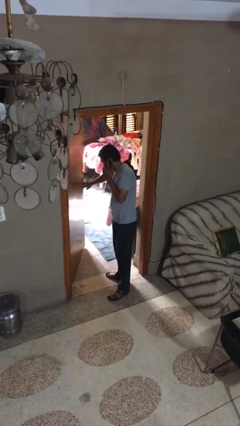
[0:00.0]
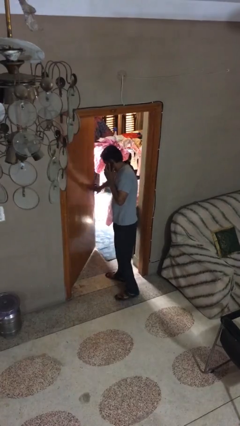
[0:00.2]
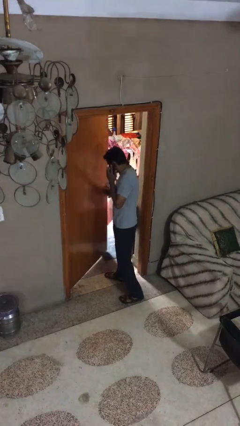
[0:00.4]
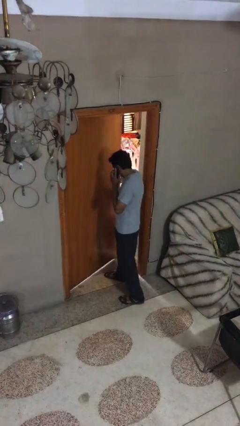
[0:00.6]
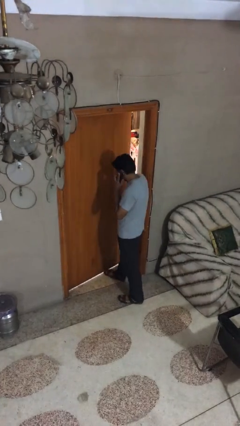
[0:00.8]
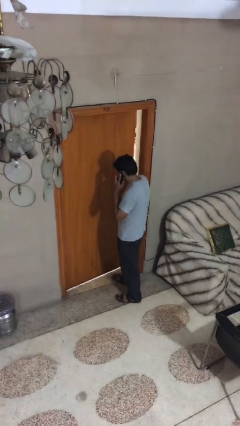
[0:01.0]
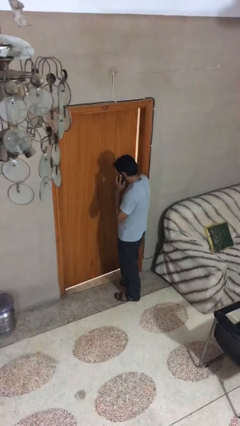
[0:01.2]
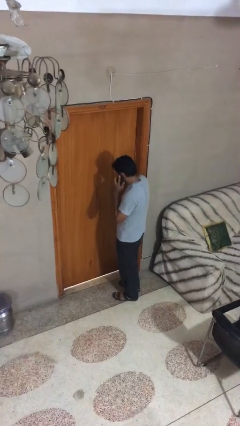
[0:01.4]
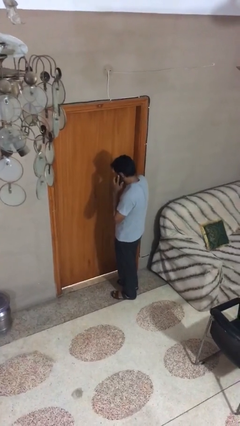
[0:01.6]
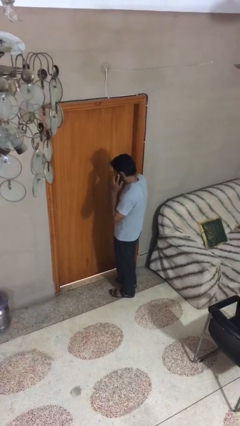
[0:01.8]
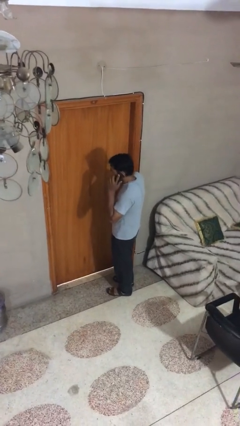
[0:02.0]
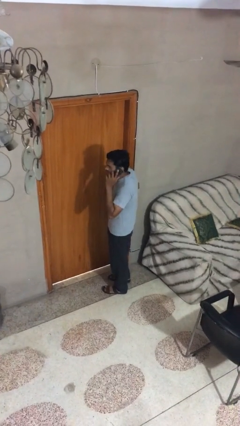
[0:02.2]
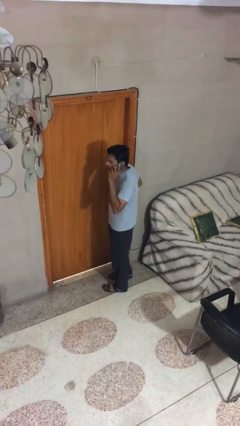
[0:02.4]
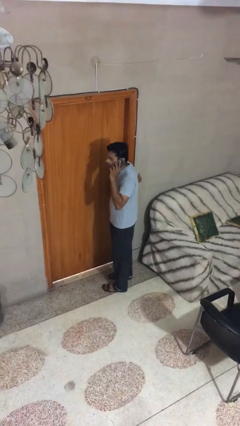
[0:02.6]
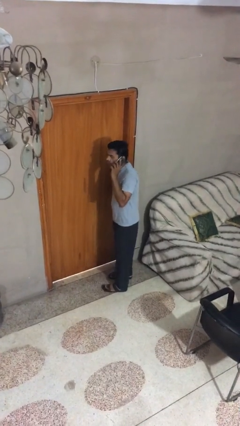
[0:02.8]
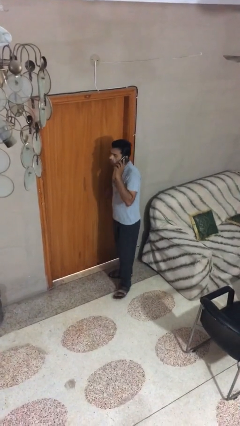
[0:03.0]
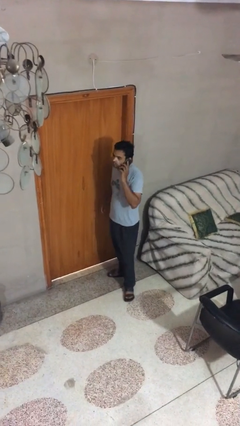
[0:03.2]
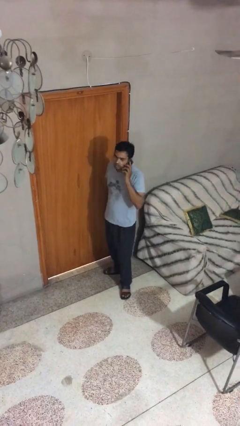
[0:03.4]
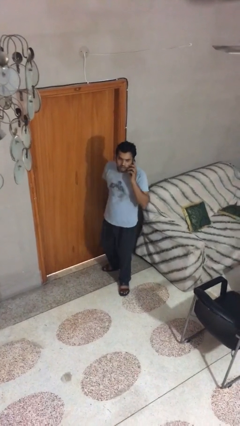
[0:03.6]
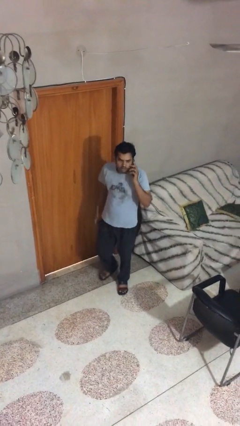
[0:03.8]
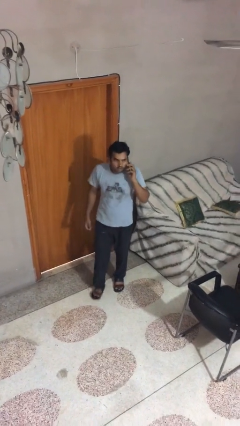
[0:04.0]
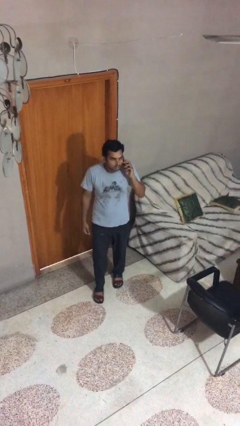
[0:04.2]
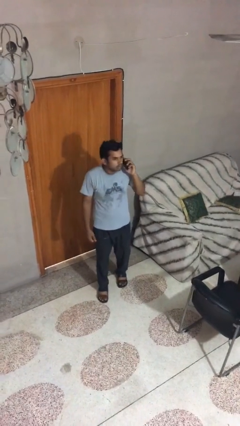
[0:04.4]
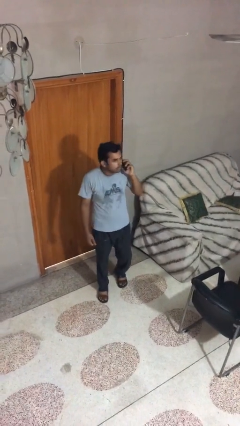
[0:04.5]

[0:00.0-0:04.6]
person closes facility door

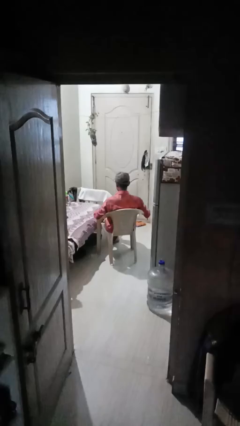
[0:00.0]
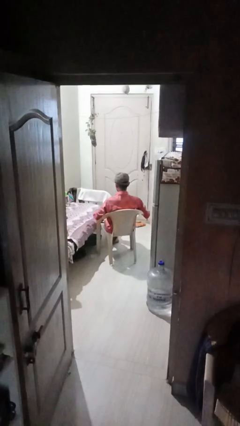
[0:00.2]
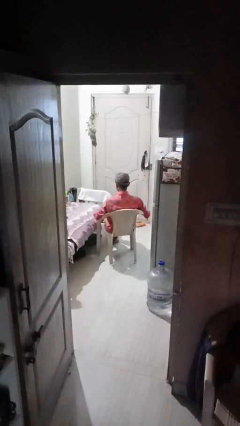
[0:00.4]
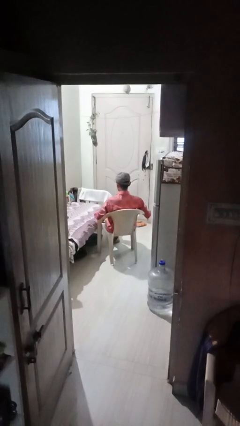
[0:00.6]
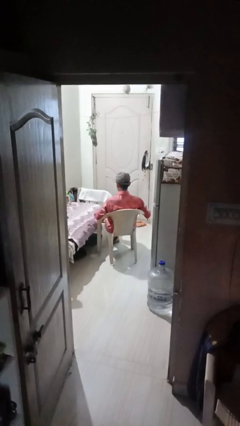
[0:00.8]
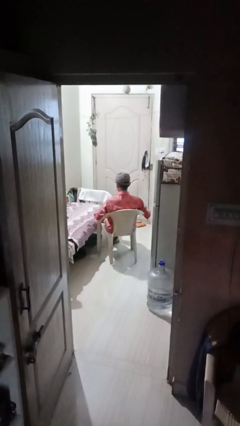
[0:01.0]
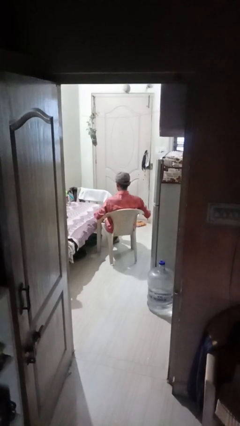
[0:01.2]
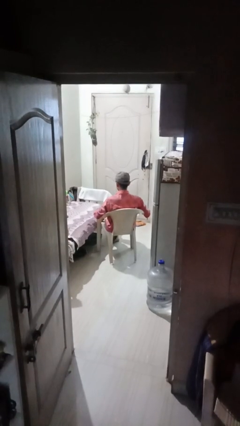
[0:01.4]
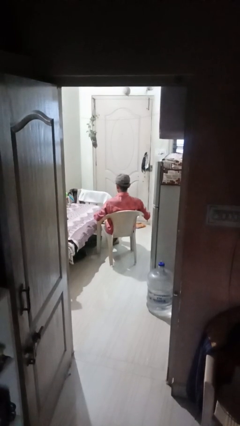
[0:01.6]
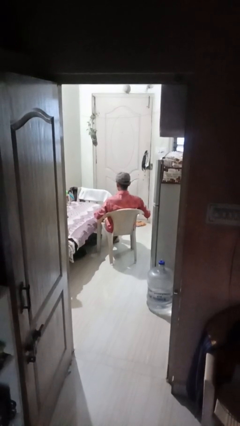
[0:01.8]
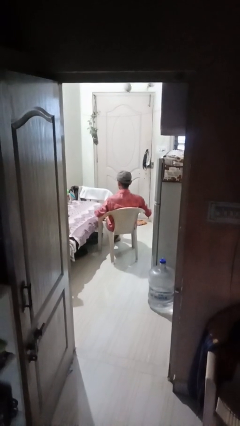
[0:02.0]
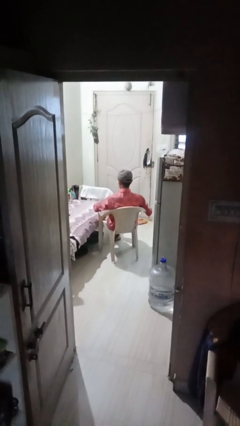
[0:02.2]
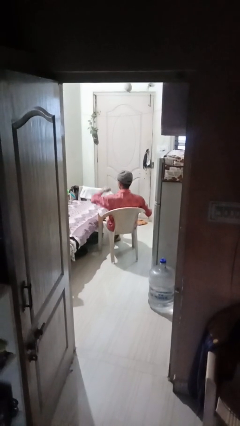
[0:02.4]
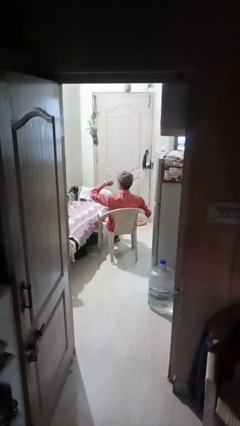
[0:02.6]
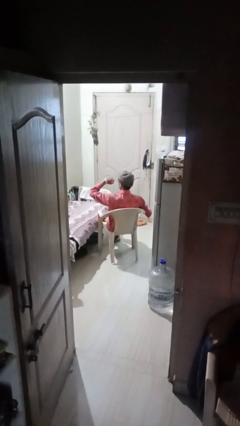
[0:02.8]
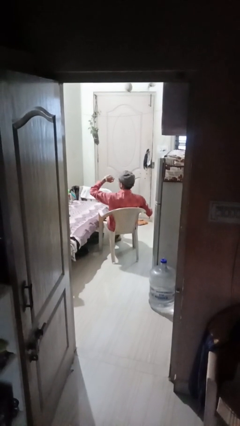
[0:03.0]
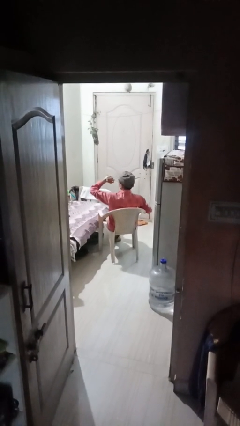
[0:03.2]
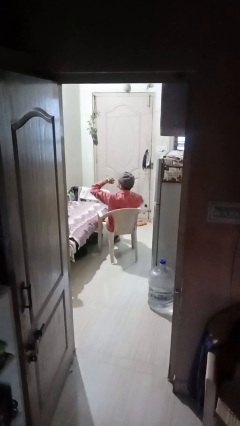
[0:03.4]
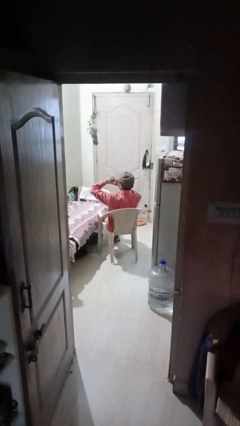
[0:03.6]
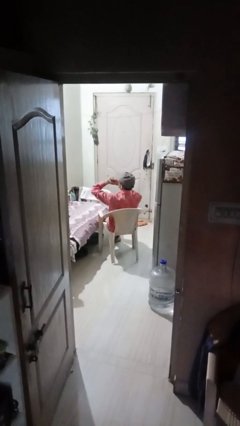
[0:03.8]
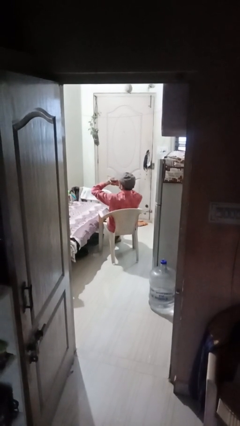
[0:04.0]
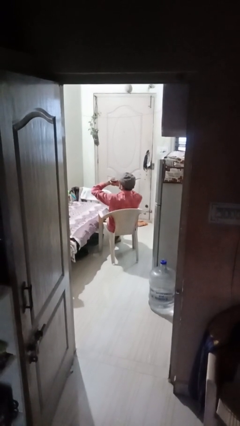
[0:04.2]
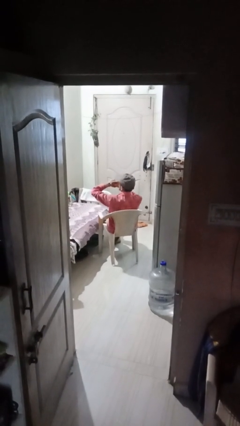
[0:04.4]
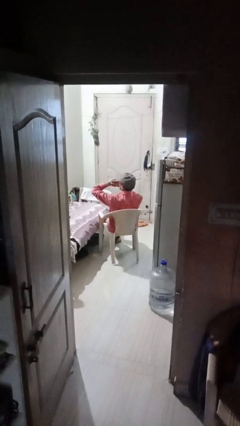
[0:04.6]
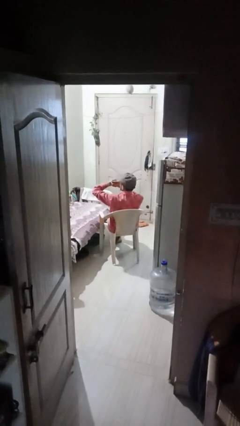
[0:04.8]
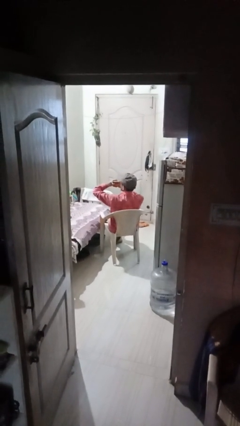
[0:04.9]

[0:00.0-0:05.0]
person looks at wristwatch

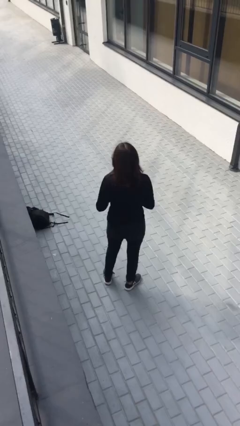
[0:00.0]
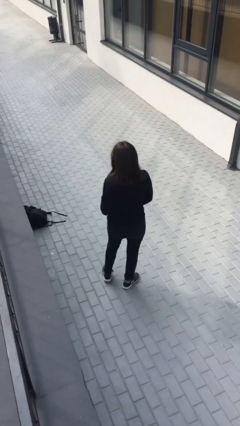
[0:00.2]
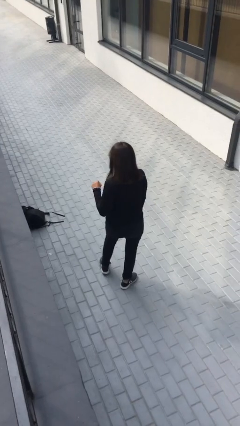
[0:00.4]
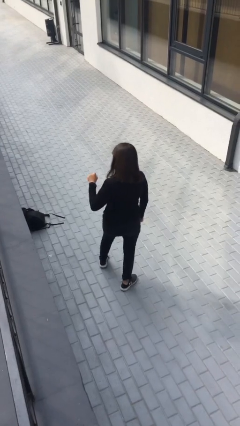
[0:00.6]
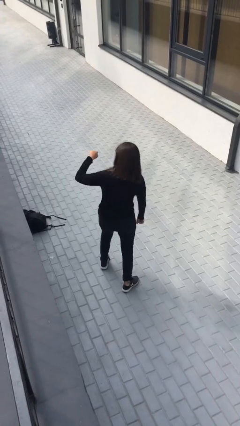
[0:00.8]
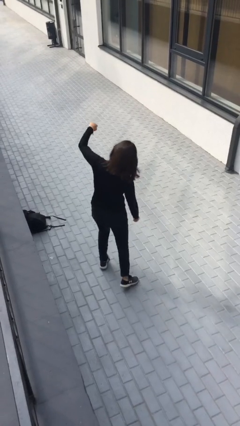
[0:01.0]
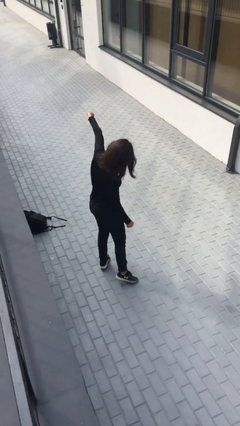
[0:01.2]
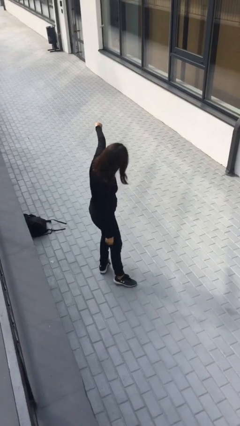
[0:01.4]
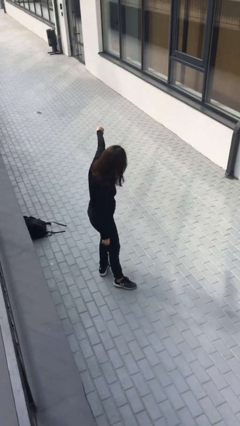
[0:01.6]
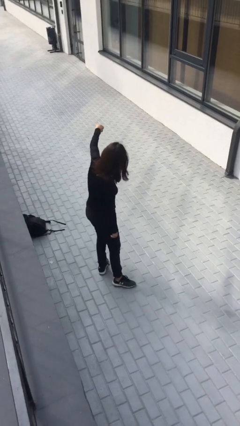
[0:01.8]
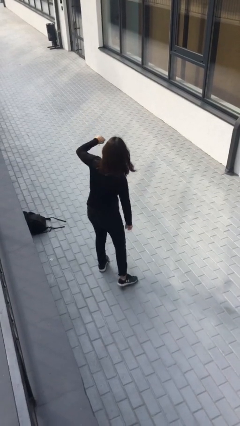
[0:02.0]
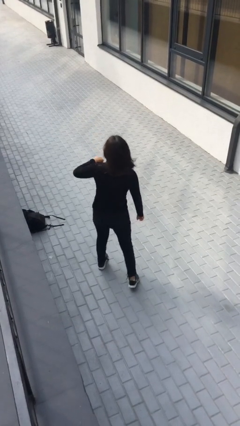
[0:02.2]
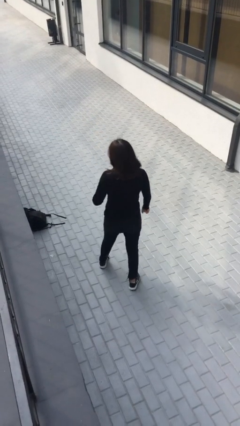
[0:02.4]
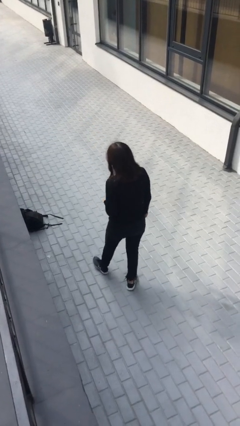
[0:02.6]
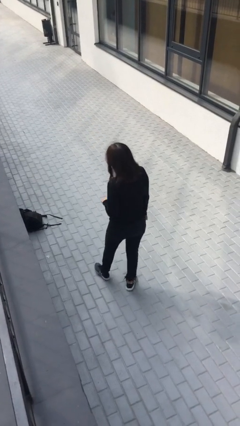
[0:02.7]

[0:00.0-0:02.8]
person punches

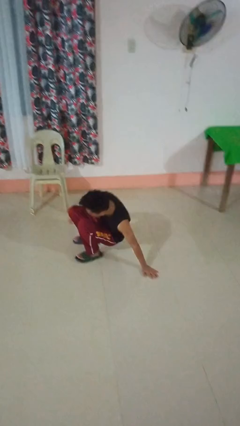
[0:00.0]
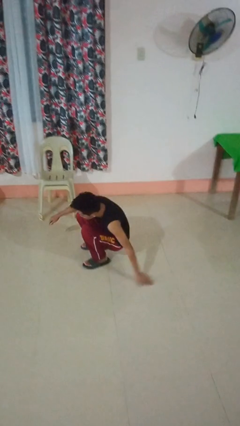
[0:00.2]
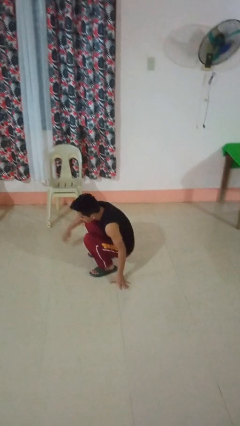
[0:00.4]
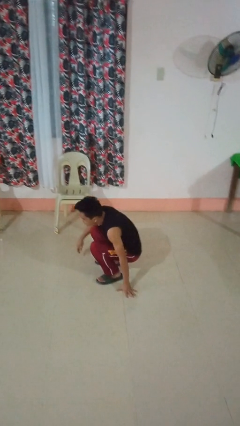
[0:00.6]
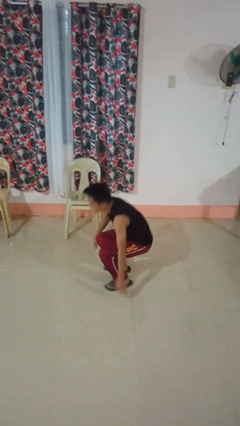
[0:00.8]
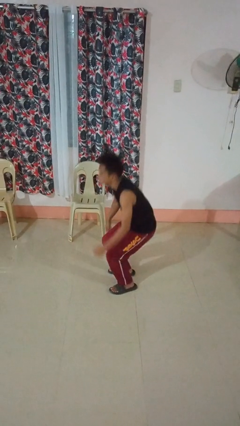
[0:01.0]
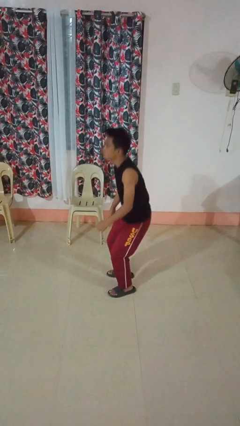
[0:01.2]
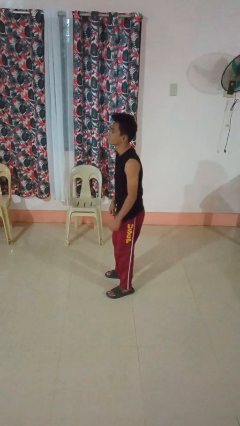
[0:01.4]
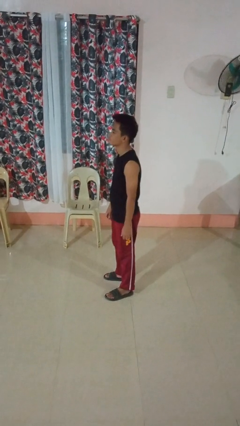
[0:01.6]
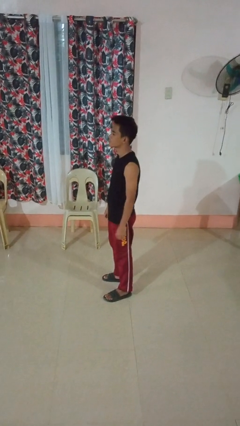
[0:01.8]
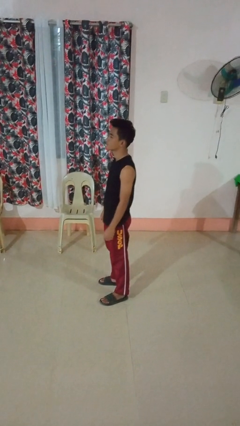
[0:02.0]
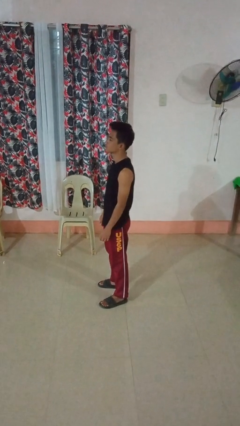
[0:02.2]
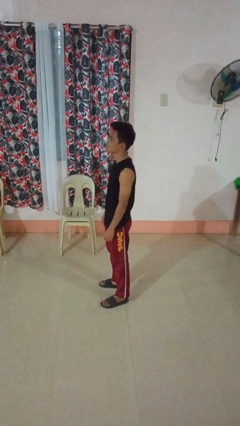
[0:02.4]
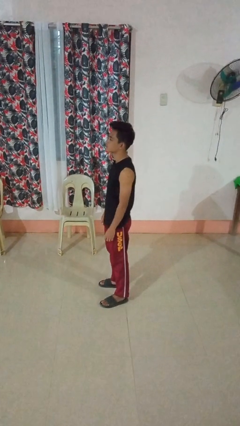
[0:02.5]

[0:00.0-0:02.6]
person stands up from floor

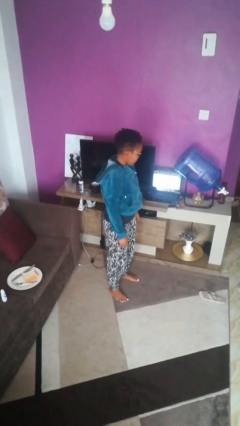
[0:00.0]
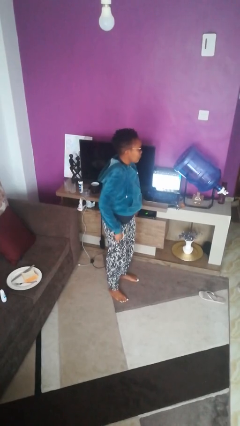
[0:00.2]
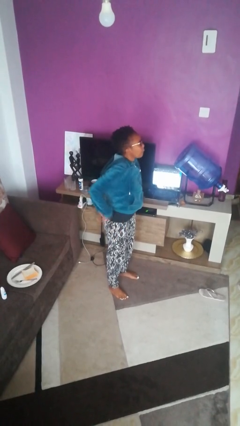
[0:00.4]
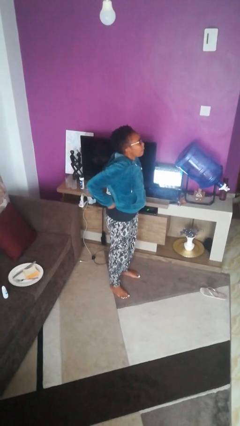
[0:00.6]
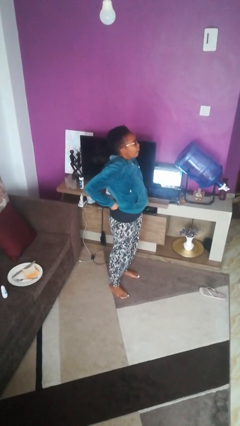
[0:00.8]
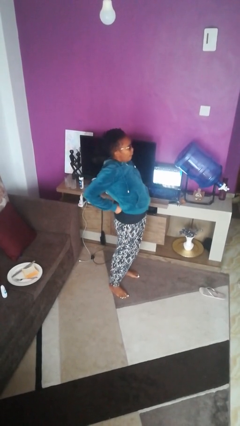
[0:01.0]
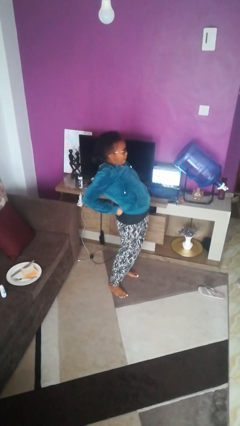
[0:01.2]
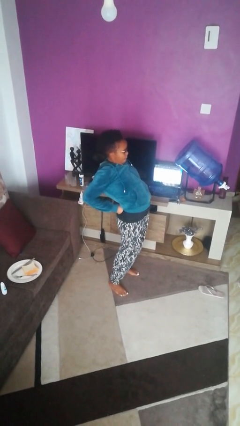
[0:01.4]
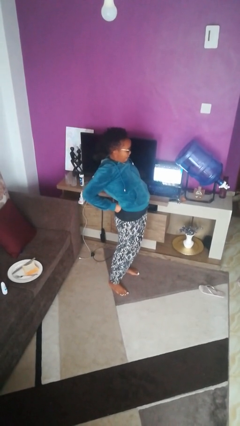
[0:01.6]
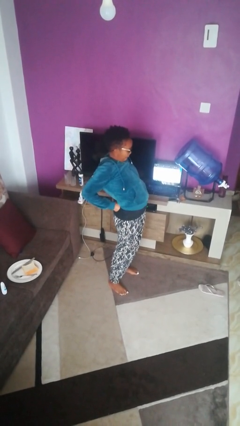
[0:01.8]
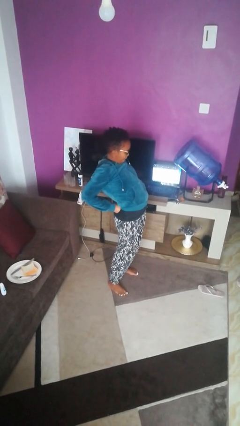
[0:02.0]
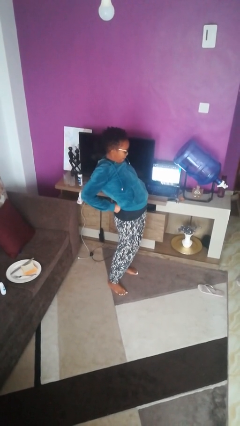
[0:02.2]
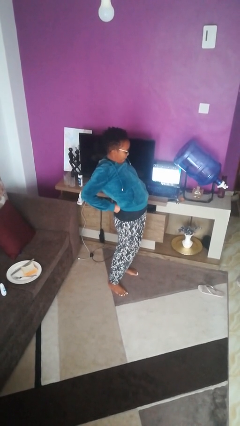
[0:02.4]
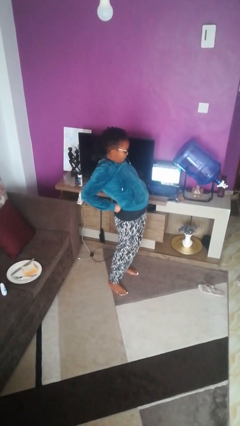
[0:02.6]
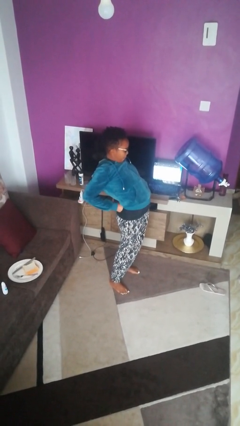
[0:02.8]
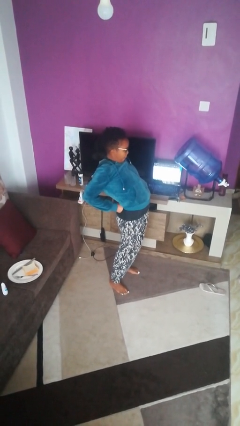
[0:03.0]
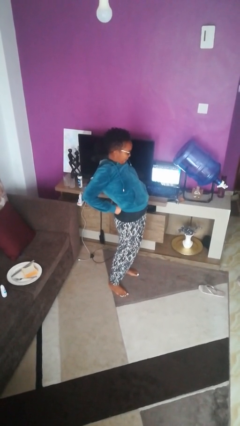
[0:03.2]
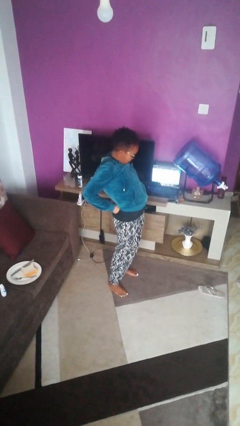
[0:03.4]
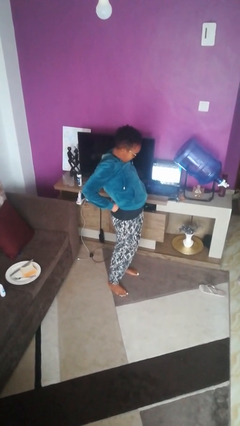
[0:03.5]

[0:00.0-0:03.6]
person stretches back
